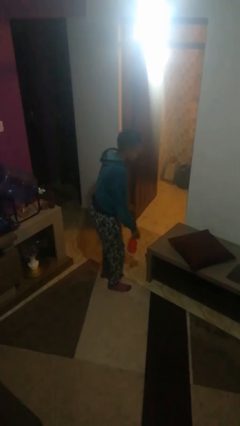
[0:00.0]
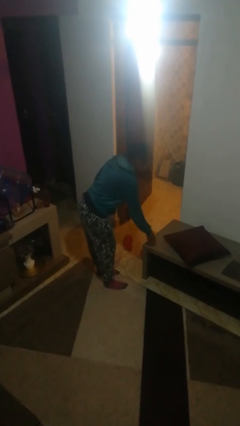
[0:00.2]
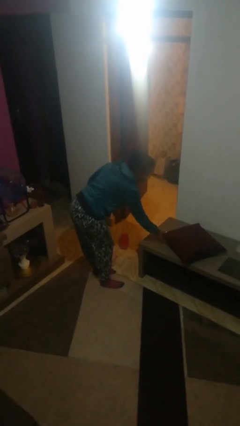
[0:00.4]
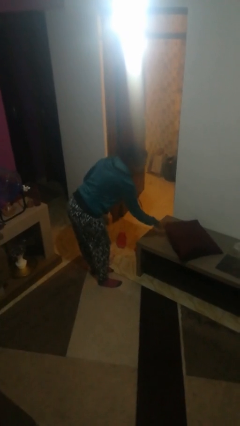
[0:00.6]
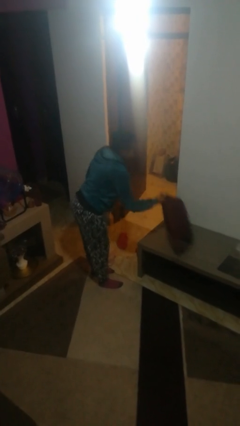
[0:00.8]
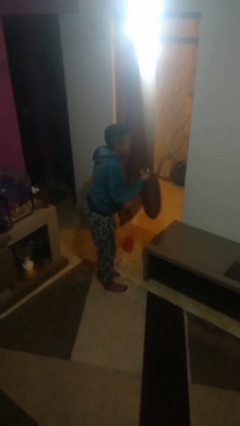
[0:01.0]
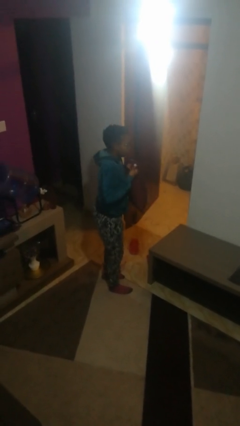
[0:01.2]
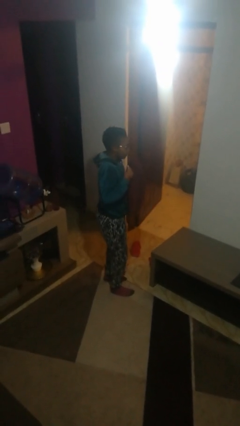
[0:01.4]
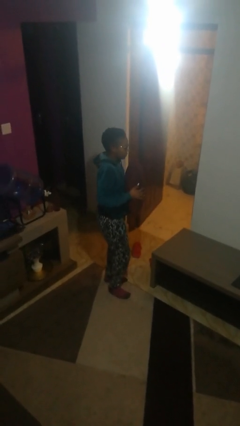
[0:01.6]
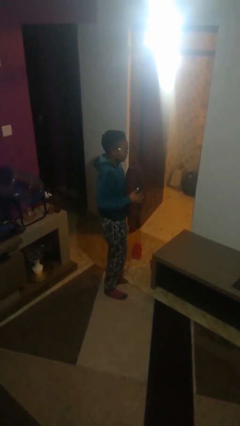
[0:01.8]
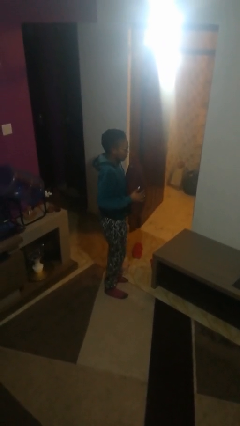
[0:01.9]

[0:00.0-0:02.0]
person picks up object from table

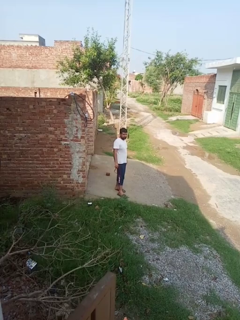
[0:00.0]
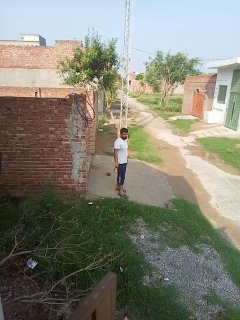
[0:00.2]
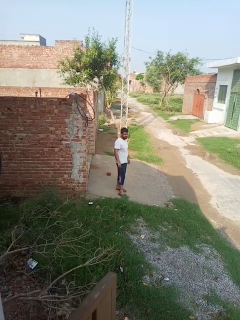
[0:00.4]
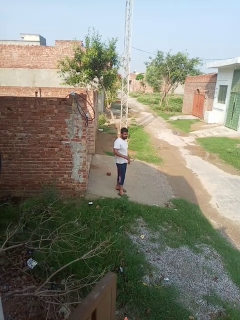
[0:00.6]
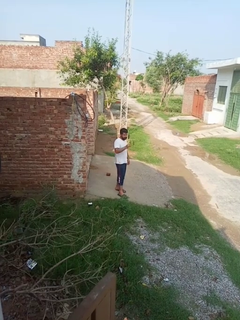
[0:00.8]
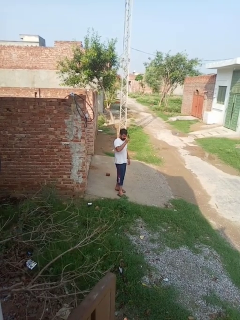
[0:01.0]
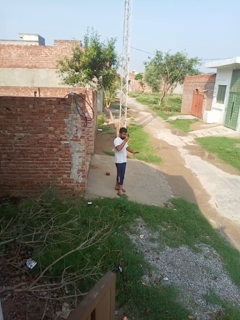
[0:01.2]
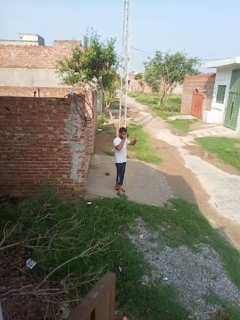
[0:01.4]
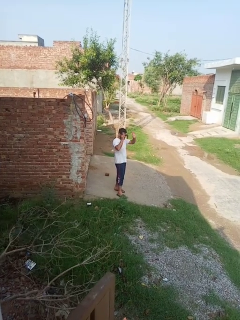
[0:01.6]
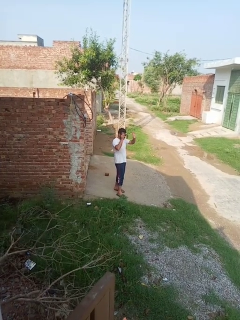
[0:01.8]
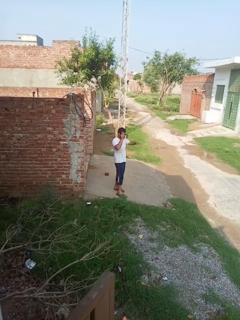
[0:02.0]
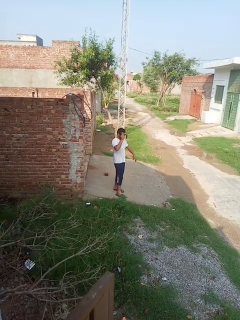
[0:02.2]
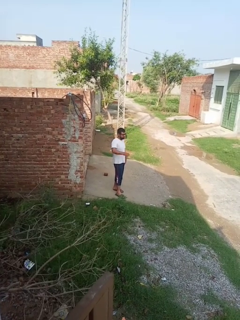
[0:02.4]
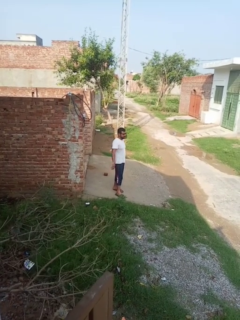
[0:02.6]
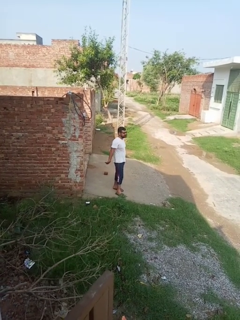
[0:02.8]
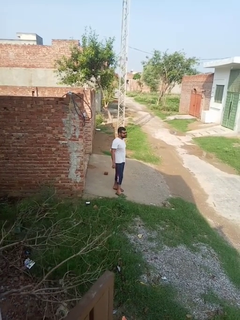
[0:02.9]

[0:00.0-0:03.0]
person puts on glasses

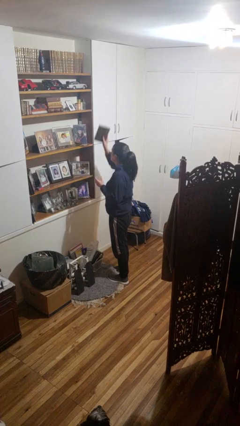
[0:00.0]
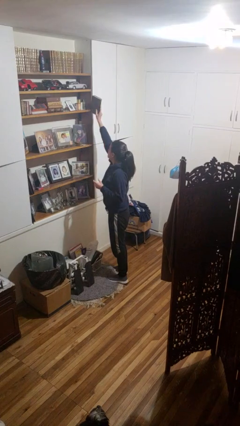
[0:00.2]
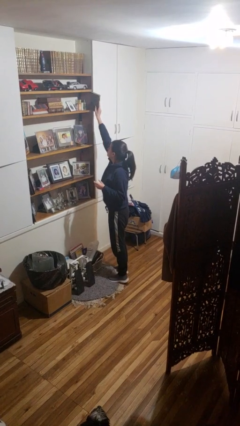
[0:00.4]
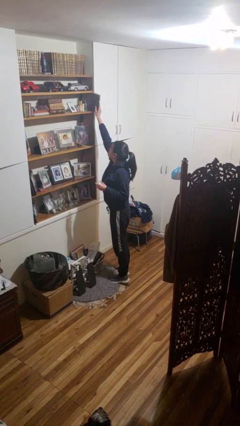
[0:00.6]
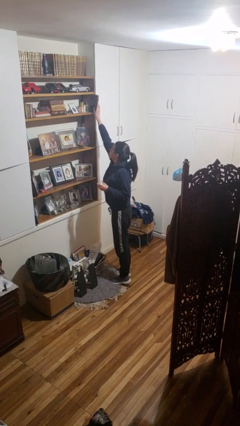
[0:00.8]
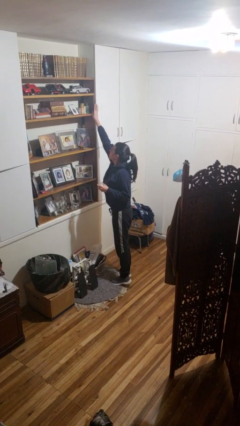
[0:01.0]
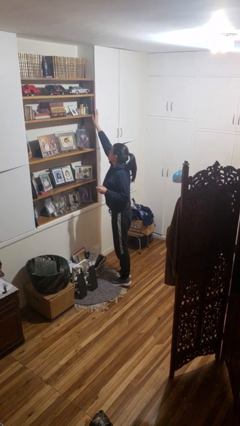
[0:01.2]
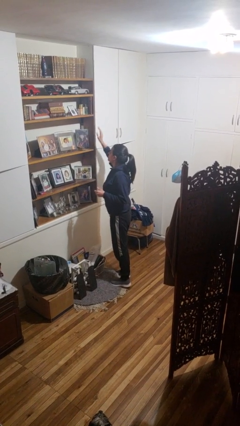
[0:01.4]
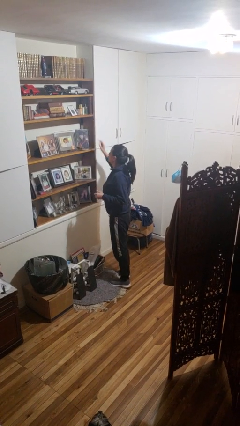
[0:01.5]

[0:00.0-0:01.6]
person puts down object on shelf

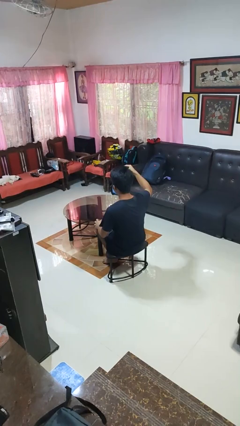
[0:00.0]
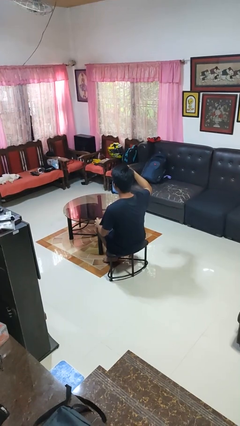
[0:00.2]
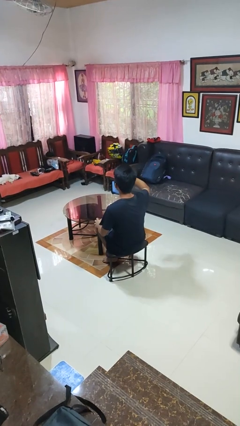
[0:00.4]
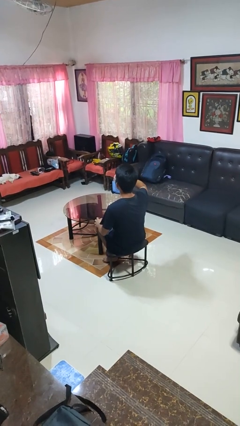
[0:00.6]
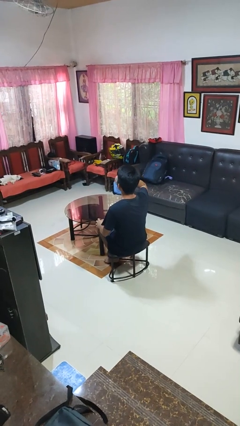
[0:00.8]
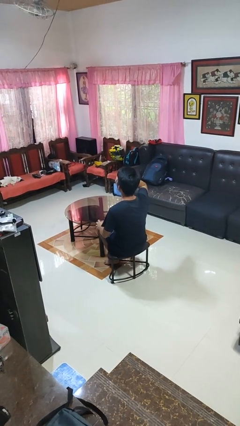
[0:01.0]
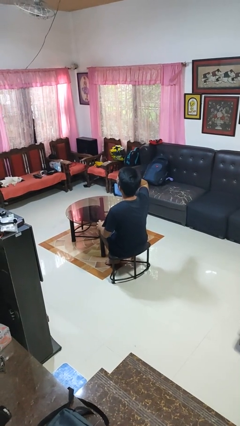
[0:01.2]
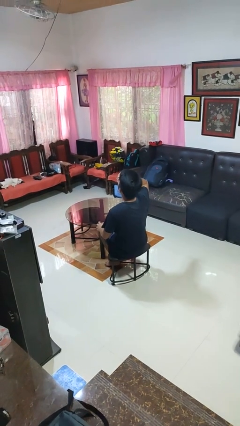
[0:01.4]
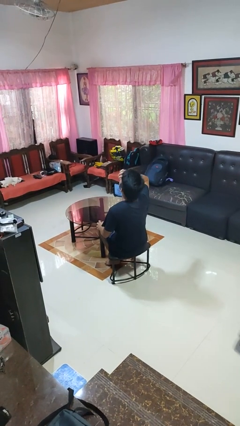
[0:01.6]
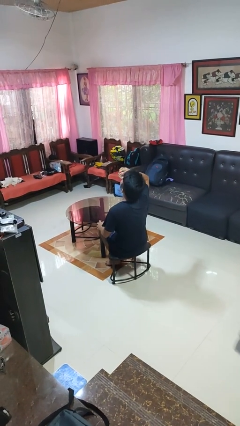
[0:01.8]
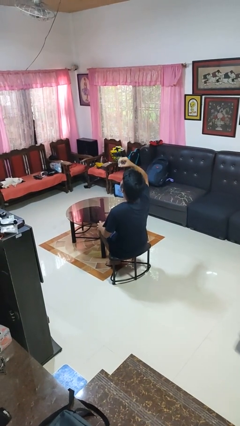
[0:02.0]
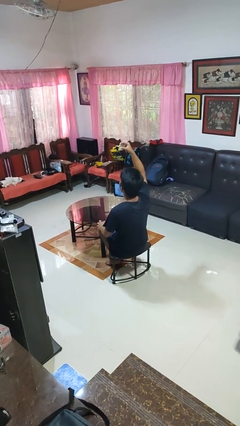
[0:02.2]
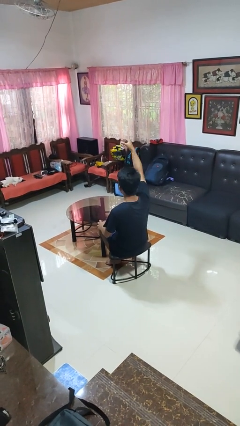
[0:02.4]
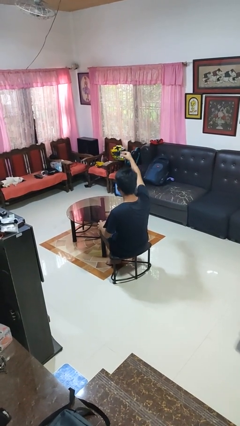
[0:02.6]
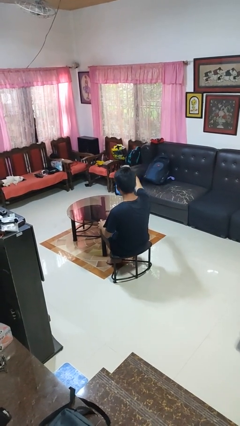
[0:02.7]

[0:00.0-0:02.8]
person drinks from shotglass

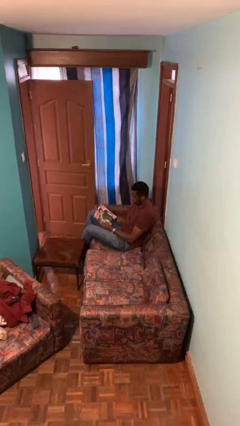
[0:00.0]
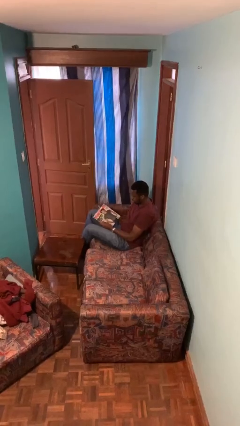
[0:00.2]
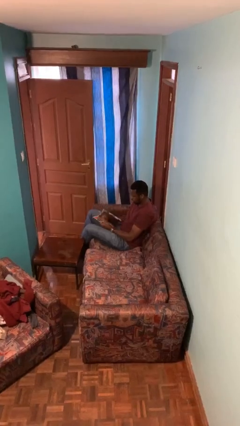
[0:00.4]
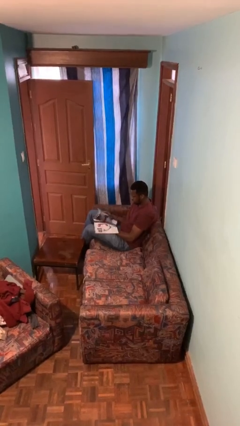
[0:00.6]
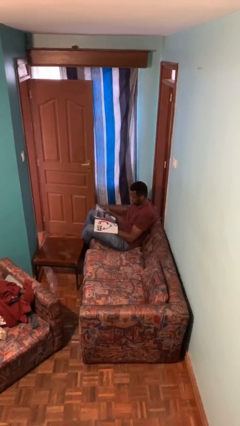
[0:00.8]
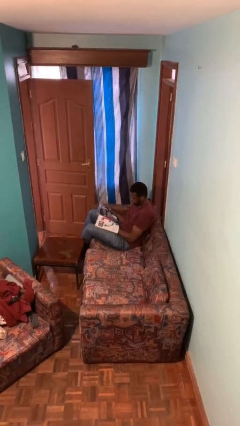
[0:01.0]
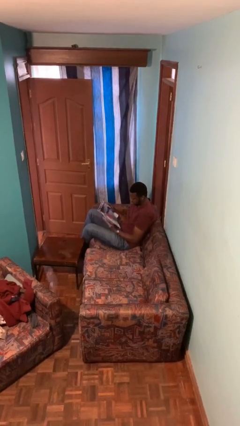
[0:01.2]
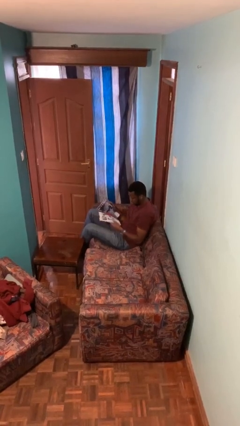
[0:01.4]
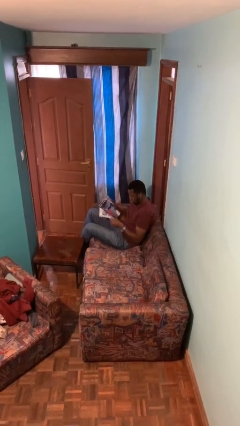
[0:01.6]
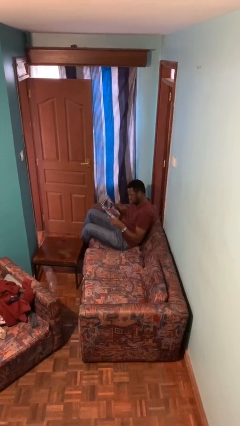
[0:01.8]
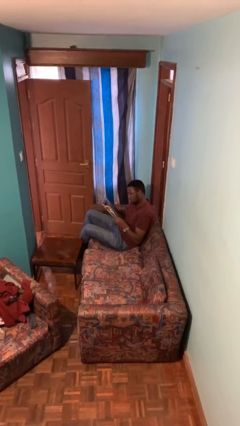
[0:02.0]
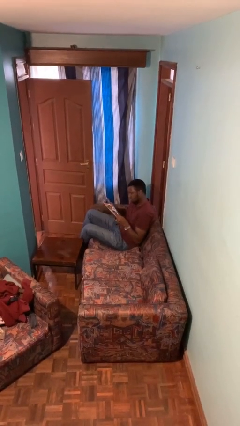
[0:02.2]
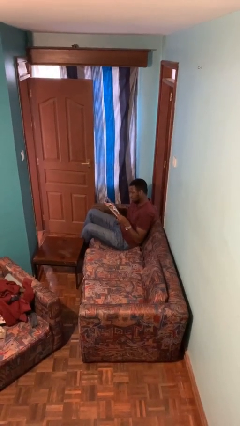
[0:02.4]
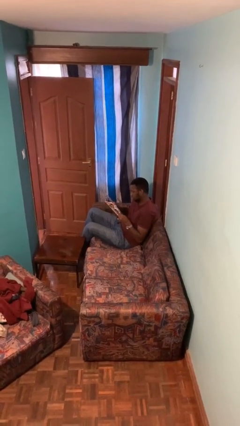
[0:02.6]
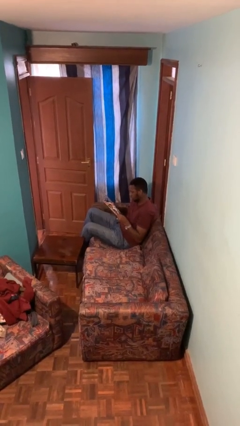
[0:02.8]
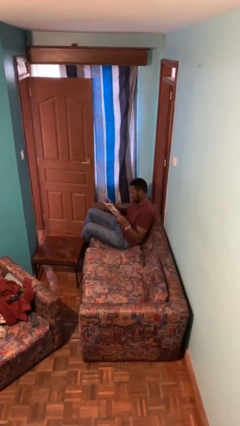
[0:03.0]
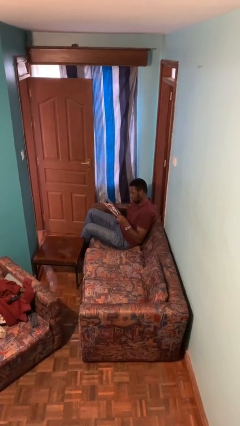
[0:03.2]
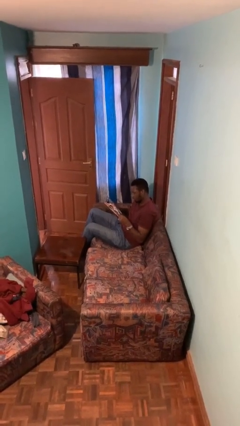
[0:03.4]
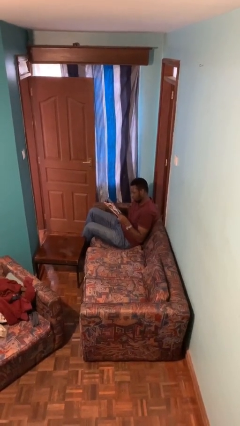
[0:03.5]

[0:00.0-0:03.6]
person reads document

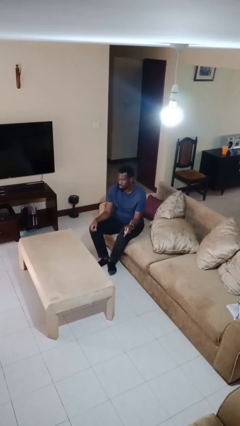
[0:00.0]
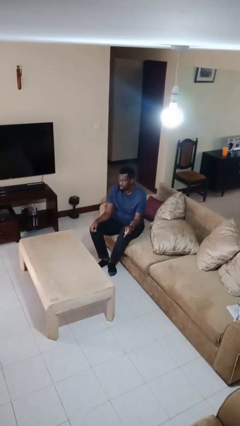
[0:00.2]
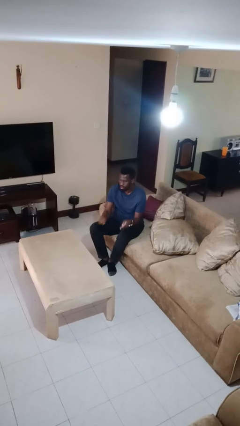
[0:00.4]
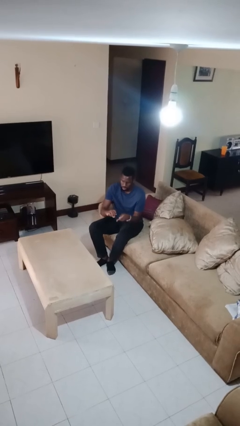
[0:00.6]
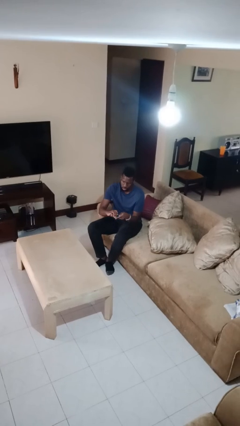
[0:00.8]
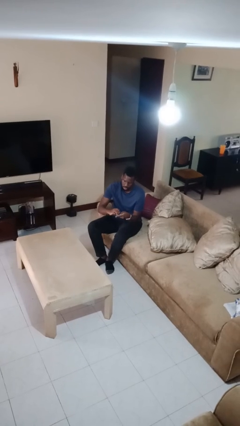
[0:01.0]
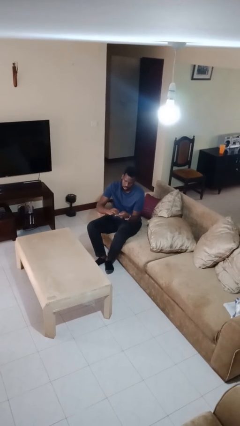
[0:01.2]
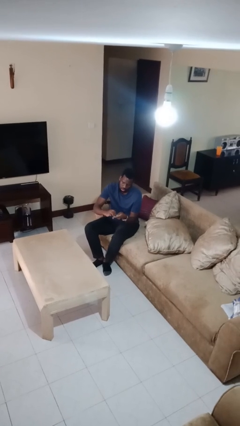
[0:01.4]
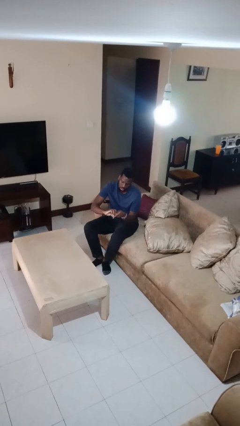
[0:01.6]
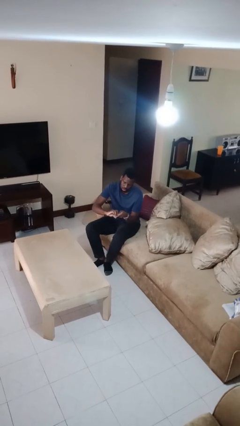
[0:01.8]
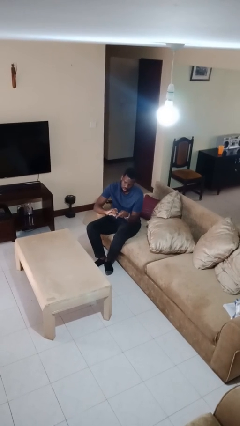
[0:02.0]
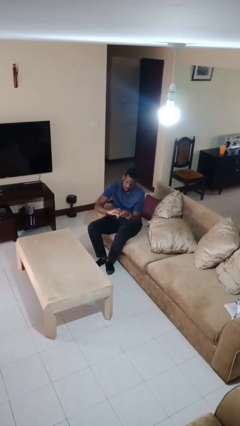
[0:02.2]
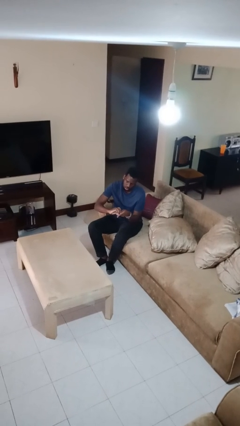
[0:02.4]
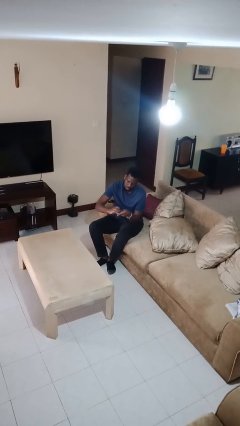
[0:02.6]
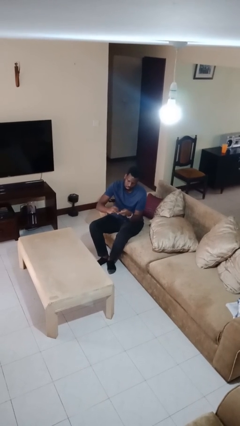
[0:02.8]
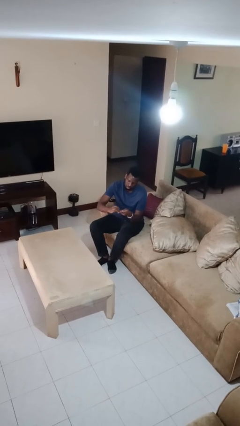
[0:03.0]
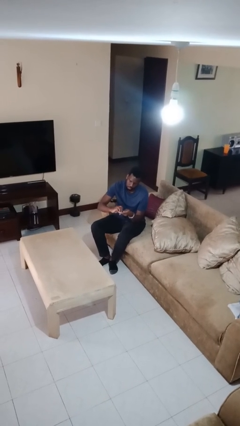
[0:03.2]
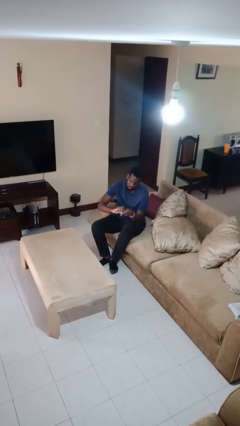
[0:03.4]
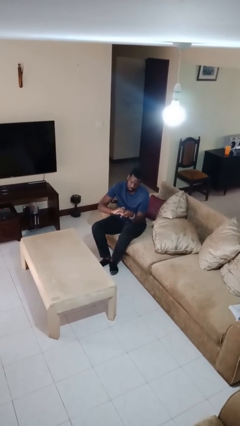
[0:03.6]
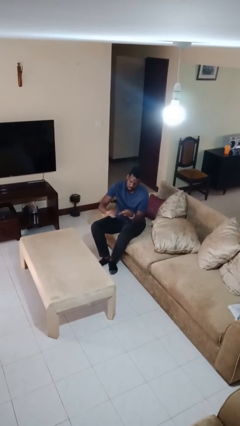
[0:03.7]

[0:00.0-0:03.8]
person files fingernails

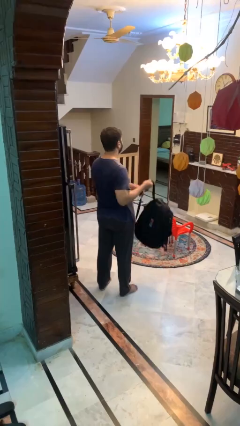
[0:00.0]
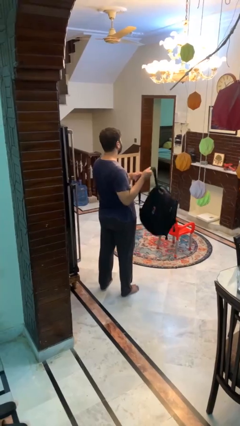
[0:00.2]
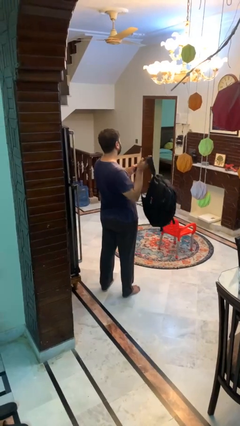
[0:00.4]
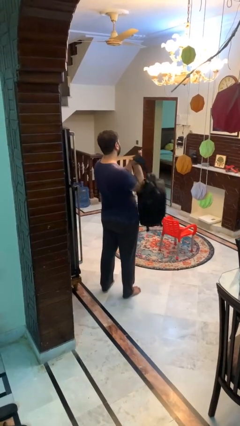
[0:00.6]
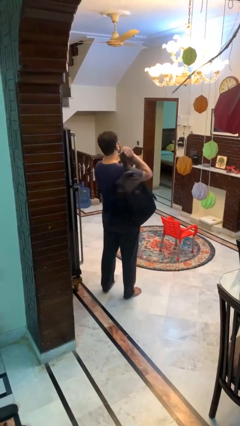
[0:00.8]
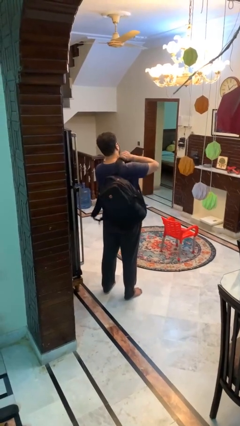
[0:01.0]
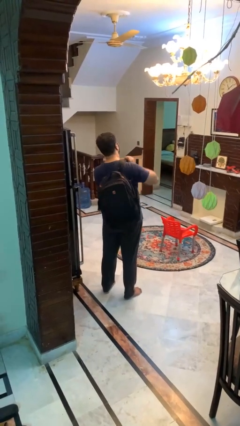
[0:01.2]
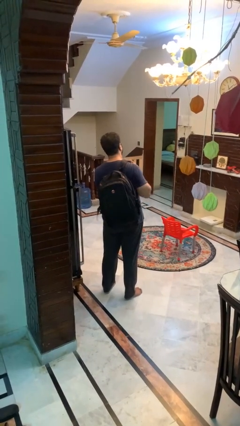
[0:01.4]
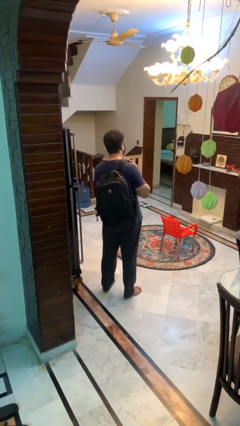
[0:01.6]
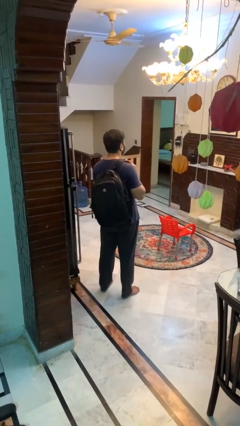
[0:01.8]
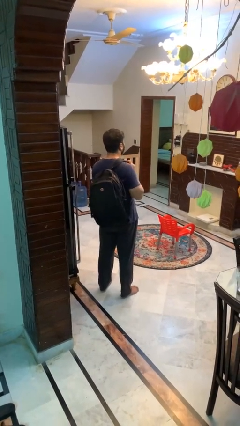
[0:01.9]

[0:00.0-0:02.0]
person puts on backpack
